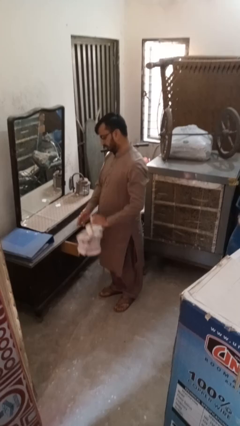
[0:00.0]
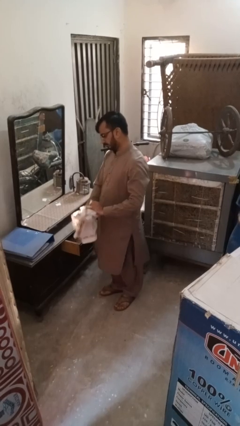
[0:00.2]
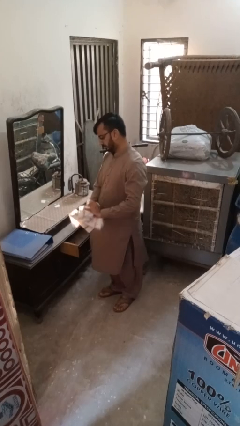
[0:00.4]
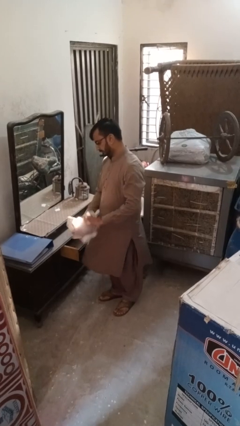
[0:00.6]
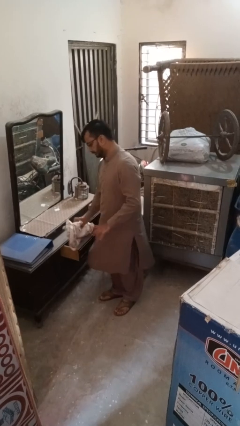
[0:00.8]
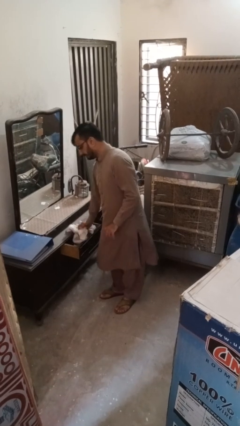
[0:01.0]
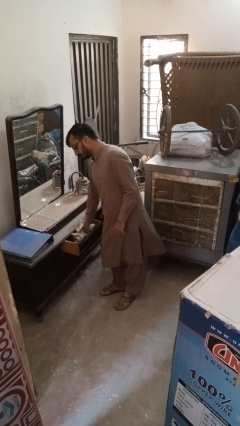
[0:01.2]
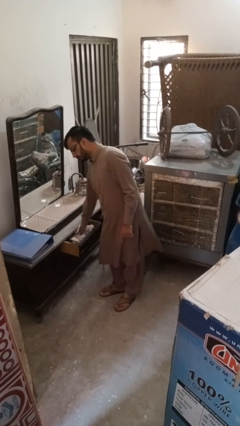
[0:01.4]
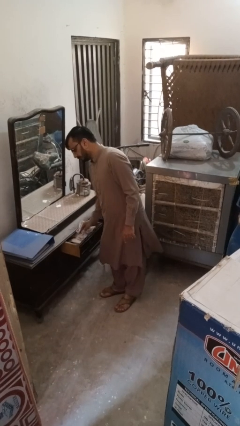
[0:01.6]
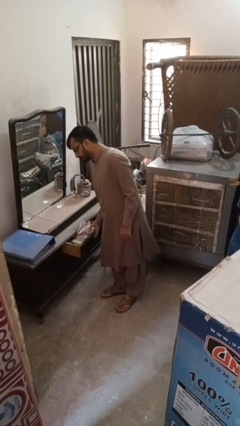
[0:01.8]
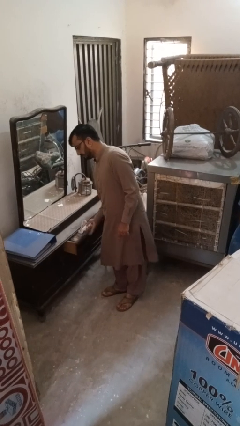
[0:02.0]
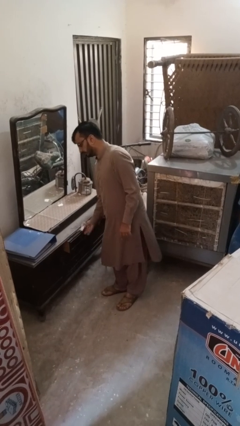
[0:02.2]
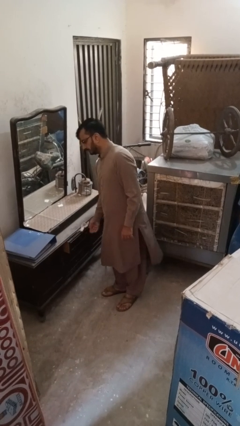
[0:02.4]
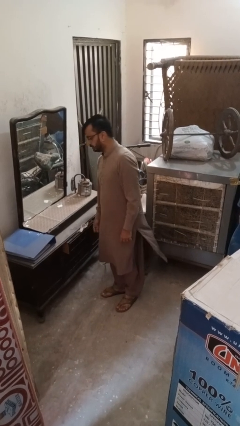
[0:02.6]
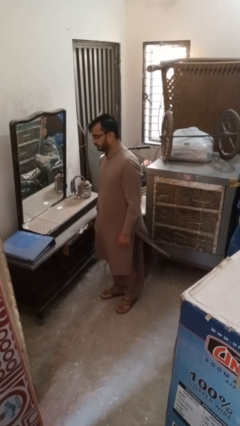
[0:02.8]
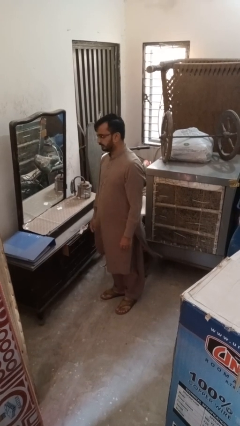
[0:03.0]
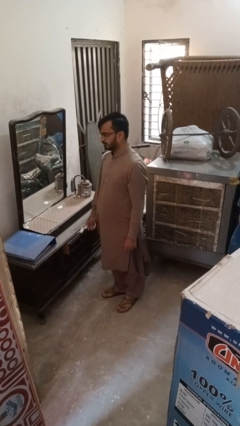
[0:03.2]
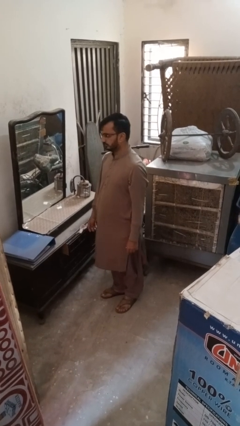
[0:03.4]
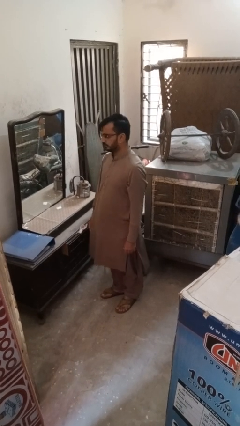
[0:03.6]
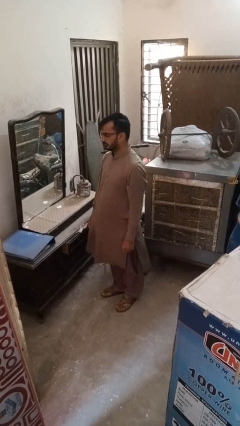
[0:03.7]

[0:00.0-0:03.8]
person puts clothes into dresser

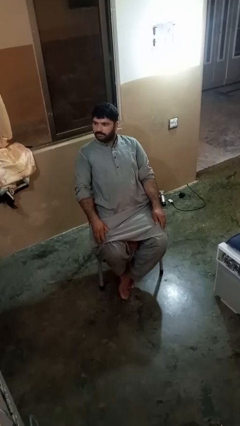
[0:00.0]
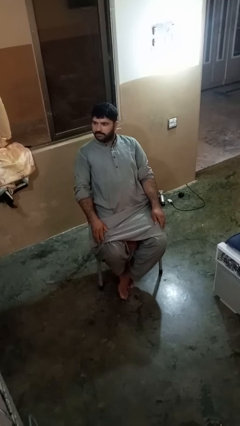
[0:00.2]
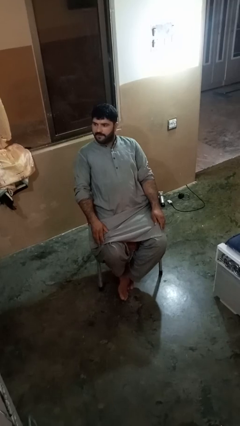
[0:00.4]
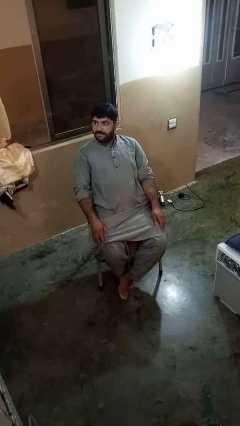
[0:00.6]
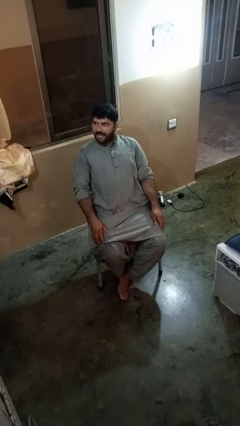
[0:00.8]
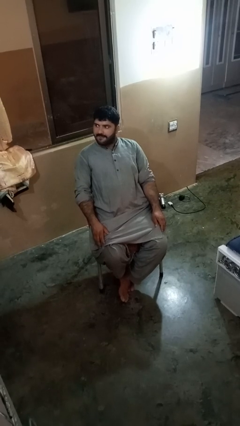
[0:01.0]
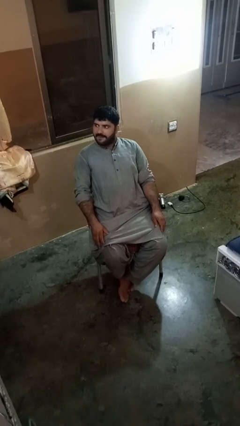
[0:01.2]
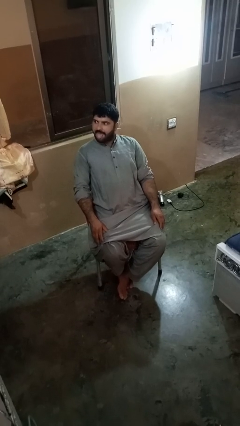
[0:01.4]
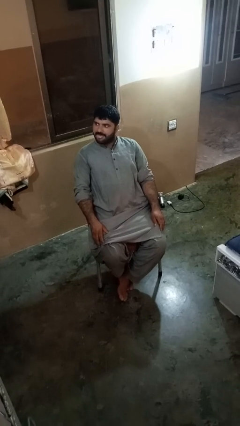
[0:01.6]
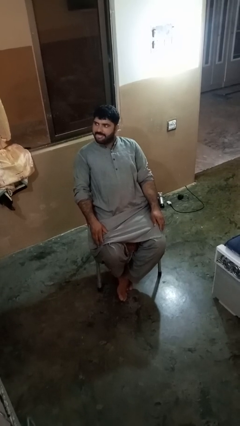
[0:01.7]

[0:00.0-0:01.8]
person sticks out tongue

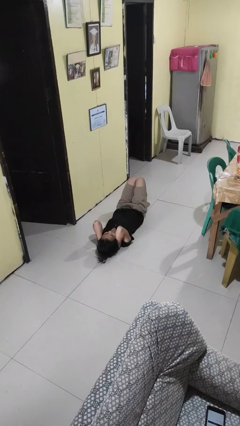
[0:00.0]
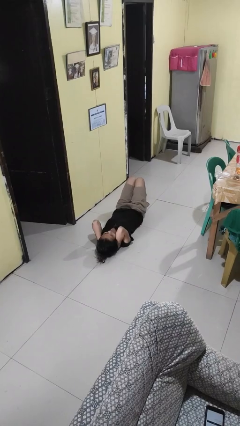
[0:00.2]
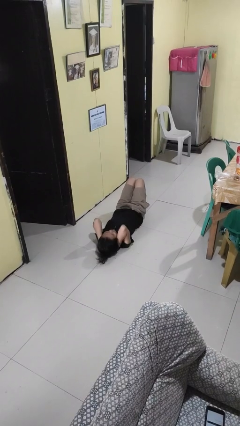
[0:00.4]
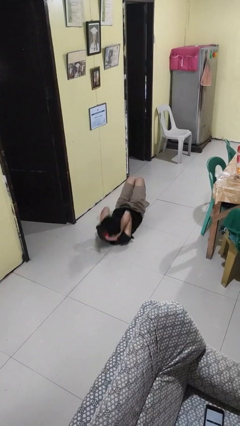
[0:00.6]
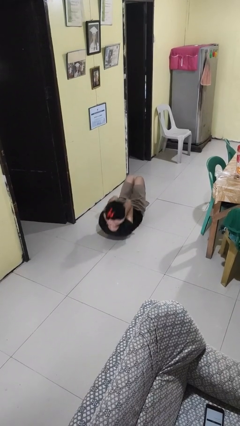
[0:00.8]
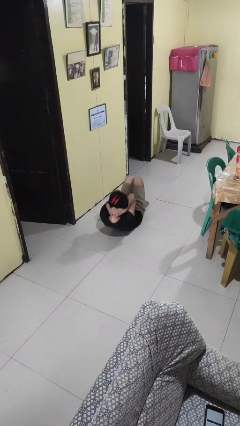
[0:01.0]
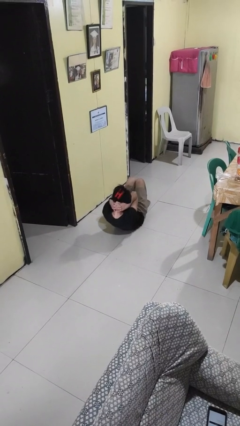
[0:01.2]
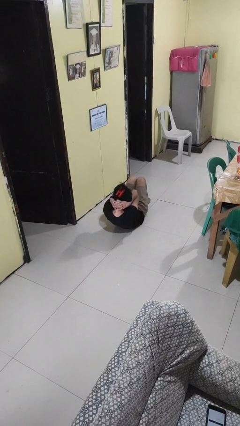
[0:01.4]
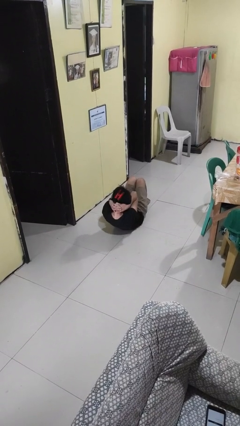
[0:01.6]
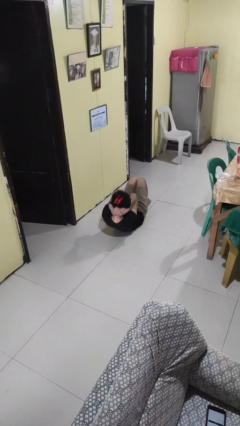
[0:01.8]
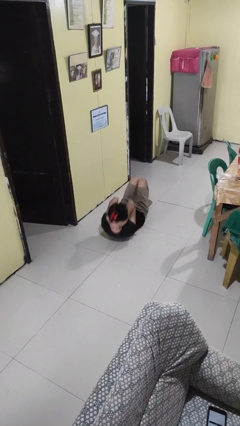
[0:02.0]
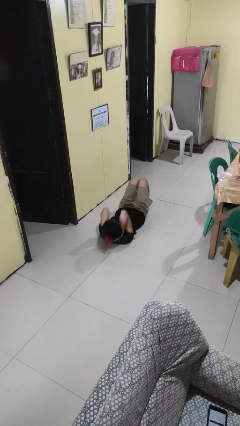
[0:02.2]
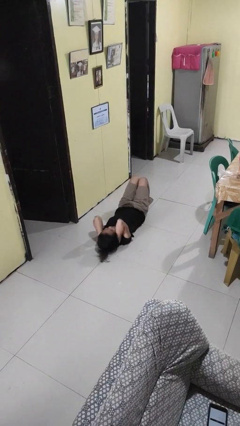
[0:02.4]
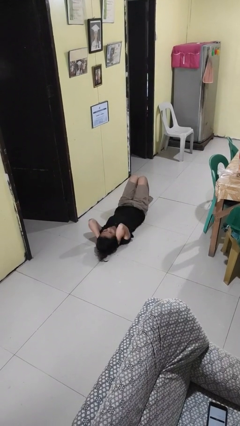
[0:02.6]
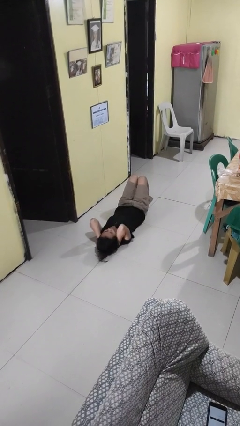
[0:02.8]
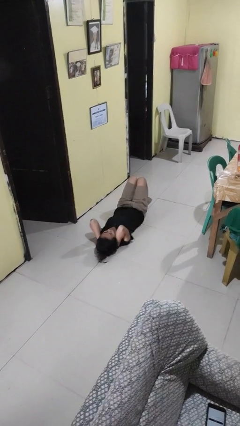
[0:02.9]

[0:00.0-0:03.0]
person exercises with situp

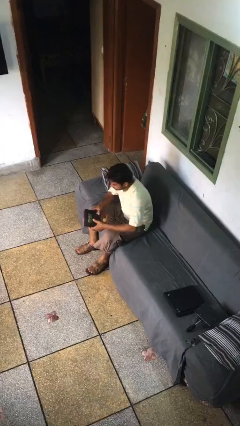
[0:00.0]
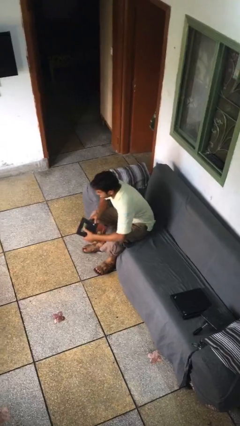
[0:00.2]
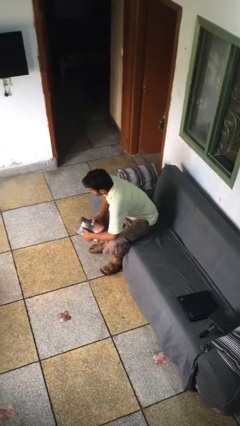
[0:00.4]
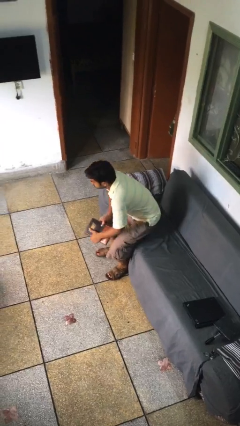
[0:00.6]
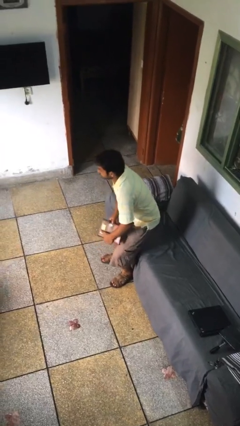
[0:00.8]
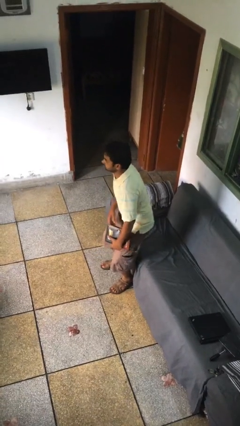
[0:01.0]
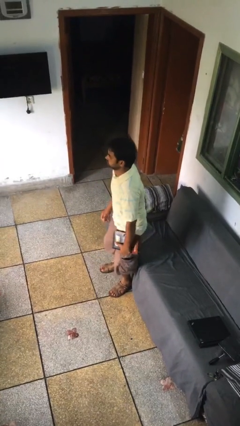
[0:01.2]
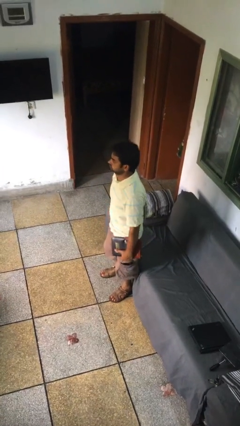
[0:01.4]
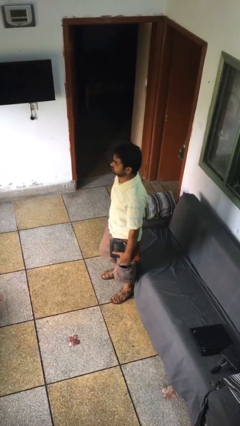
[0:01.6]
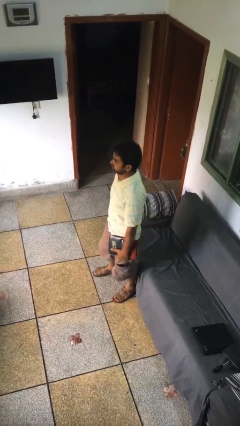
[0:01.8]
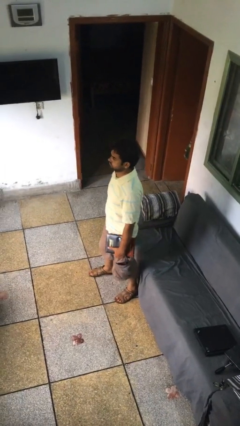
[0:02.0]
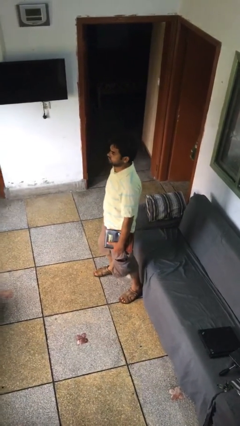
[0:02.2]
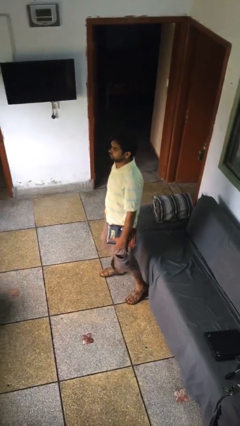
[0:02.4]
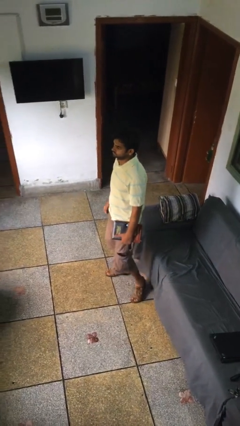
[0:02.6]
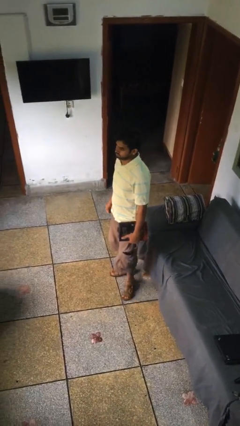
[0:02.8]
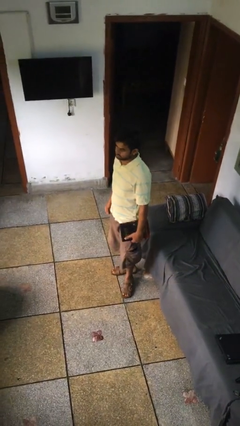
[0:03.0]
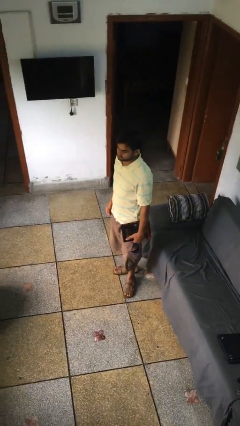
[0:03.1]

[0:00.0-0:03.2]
person stands up

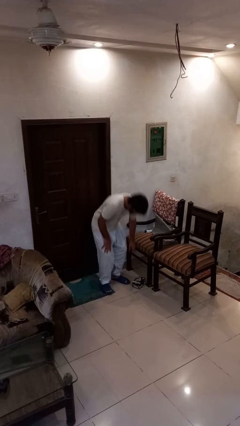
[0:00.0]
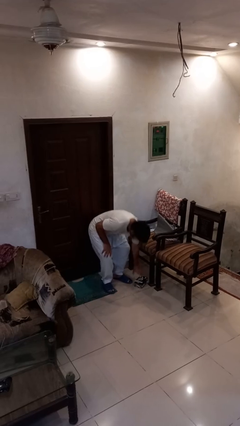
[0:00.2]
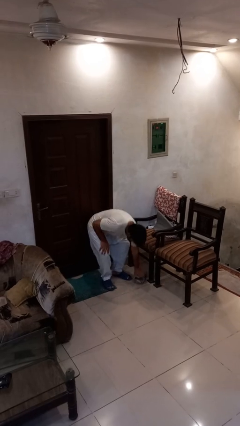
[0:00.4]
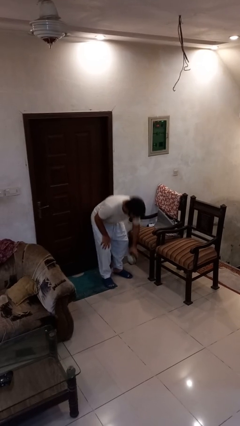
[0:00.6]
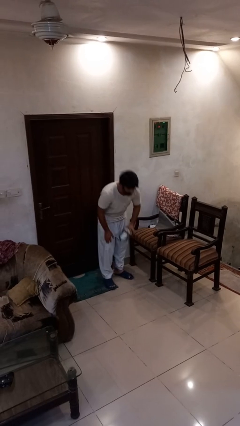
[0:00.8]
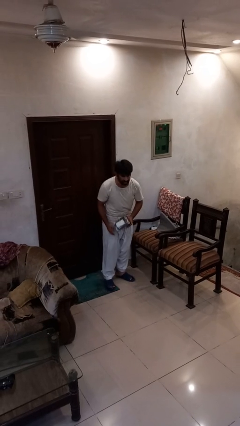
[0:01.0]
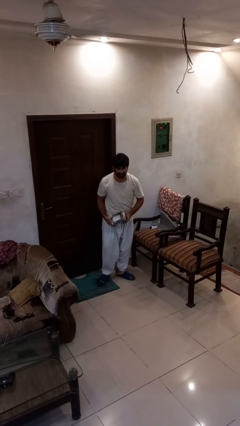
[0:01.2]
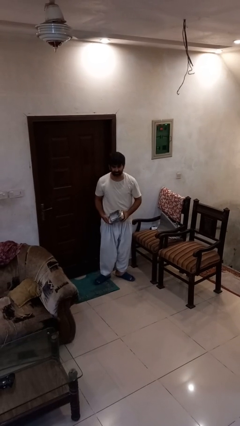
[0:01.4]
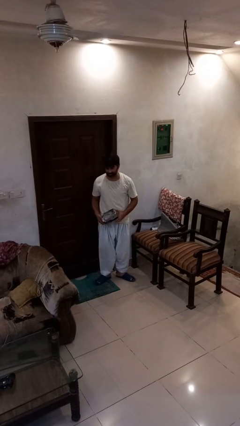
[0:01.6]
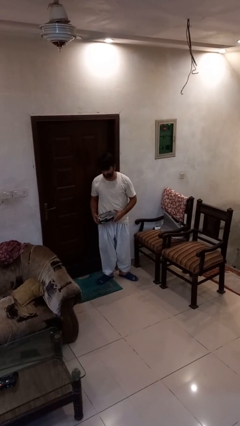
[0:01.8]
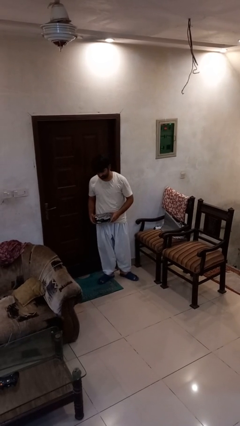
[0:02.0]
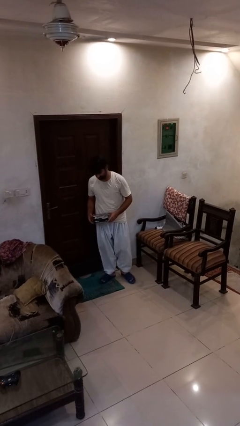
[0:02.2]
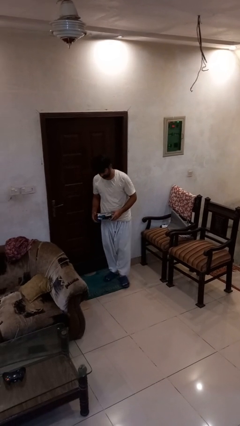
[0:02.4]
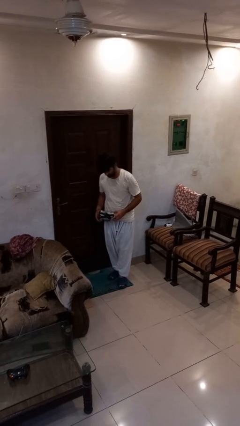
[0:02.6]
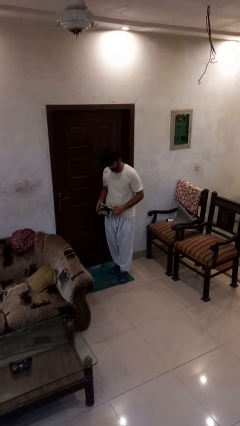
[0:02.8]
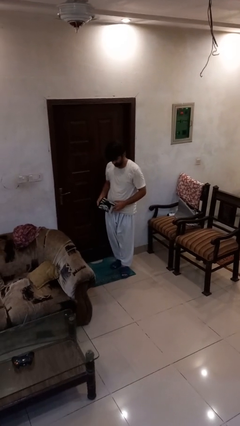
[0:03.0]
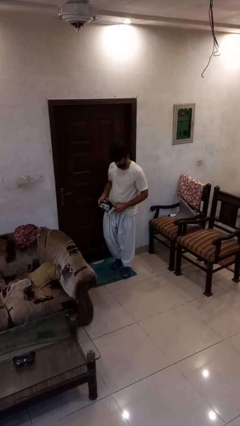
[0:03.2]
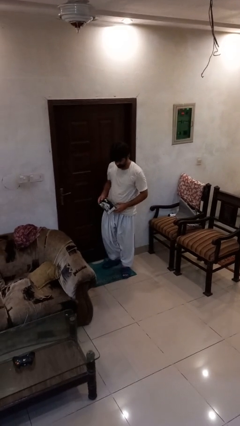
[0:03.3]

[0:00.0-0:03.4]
person picks up object from floor

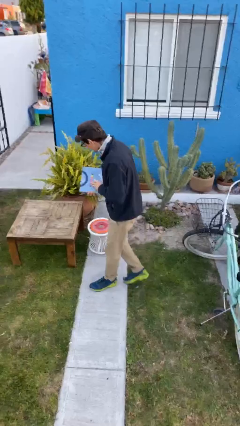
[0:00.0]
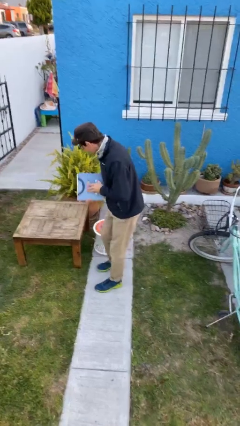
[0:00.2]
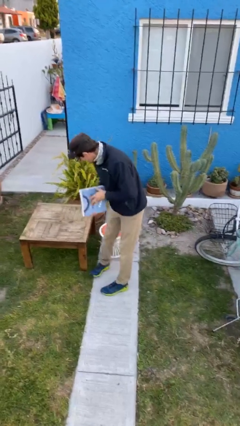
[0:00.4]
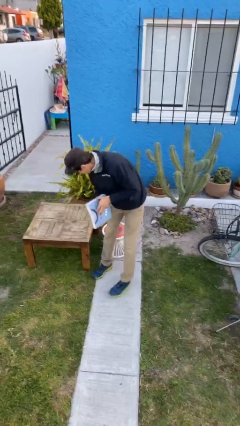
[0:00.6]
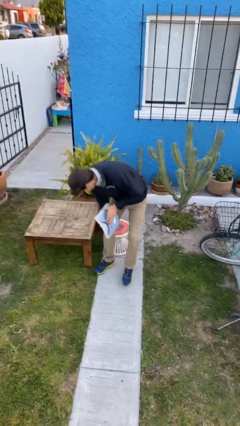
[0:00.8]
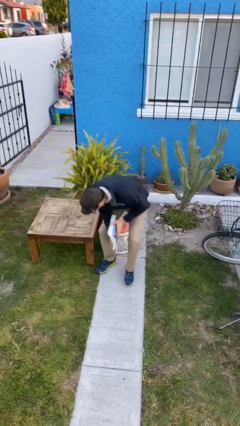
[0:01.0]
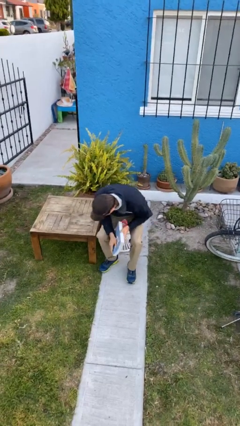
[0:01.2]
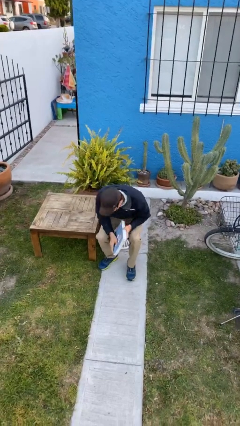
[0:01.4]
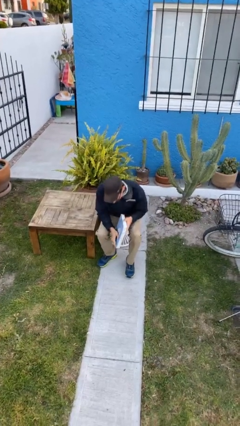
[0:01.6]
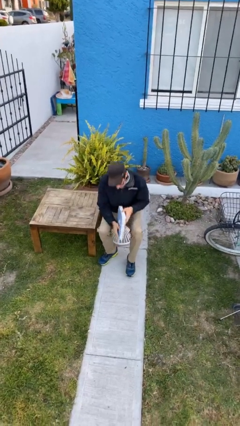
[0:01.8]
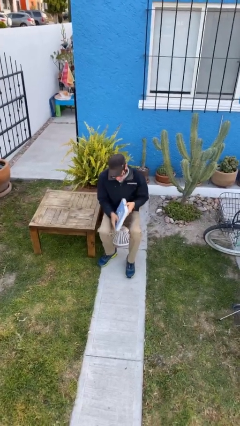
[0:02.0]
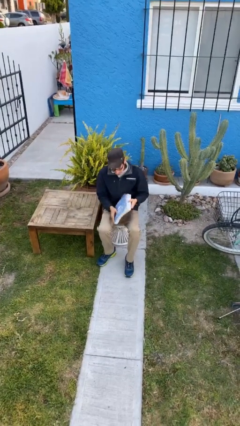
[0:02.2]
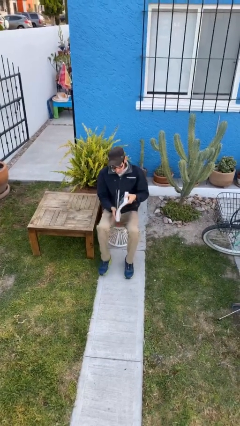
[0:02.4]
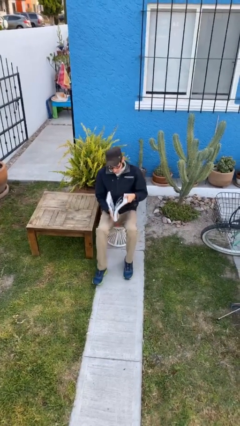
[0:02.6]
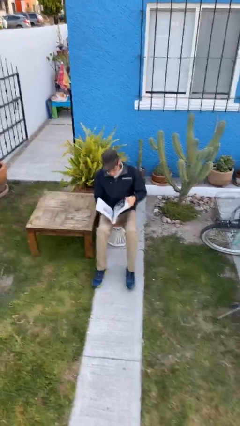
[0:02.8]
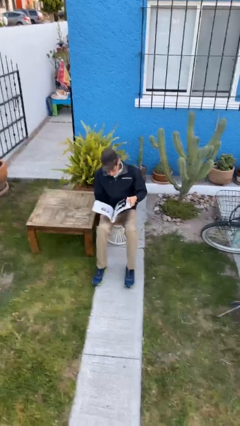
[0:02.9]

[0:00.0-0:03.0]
person sits down
